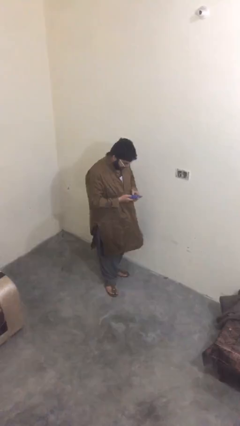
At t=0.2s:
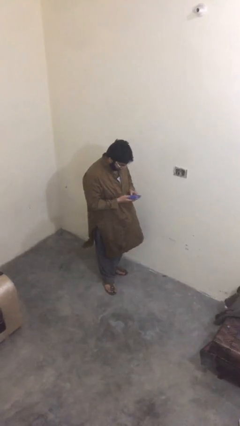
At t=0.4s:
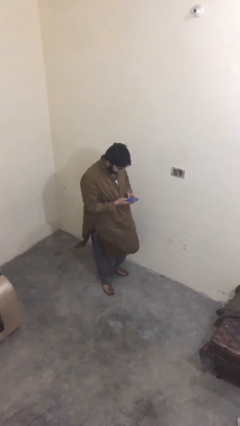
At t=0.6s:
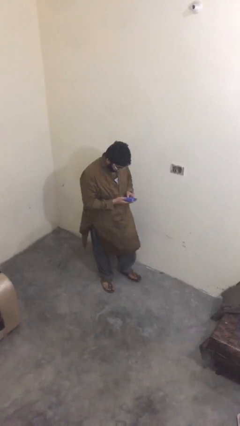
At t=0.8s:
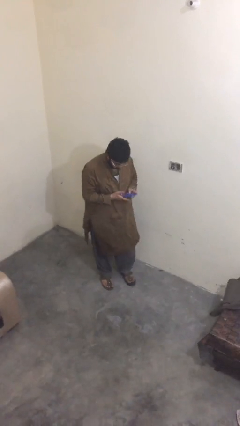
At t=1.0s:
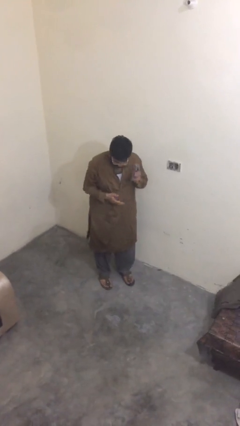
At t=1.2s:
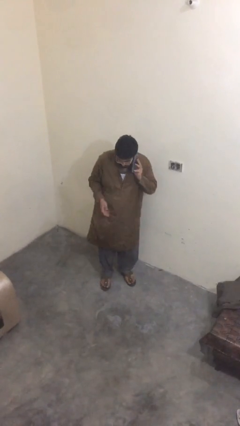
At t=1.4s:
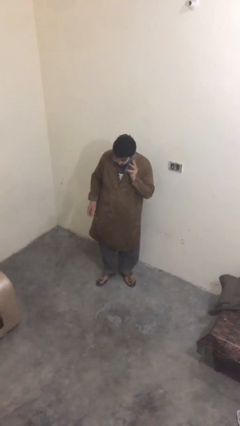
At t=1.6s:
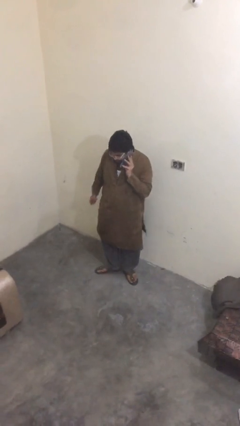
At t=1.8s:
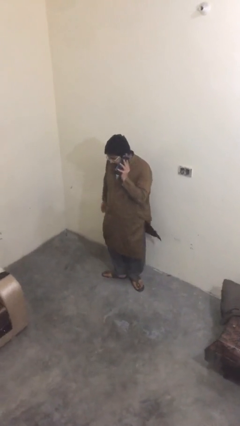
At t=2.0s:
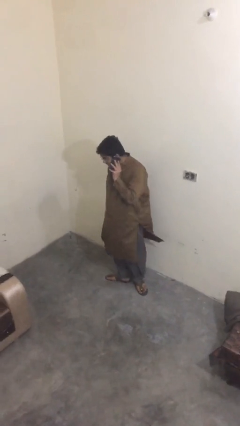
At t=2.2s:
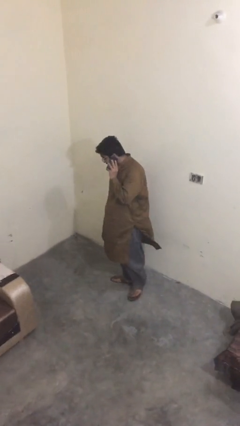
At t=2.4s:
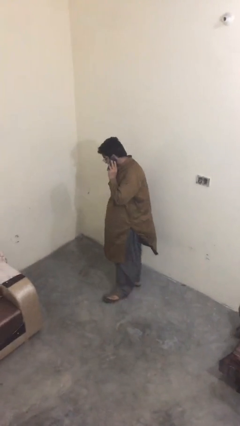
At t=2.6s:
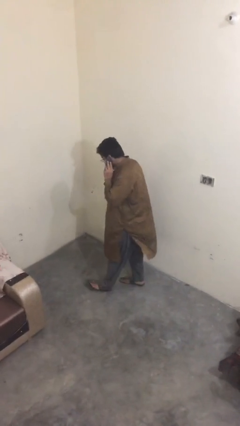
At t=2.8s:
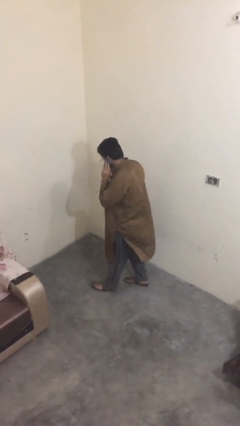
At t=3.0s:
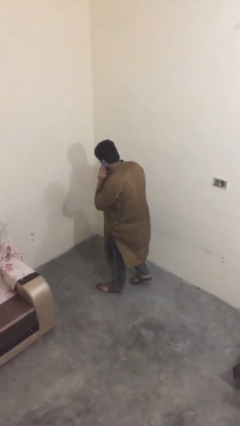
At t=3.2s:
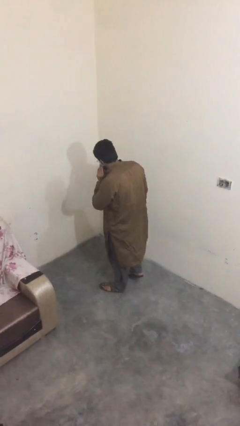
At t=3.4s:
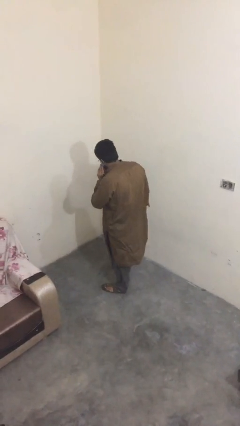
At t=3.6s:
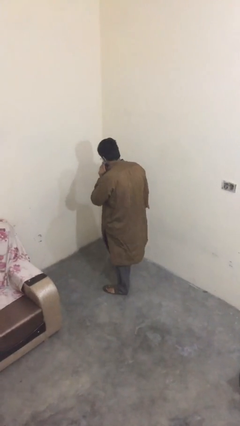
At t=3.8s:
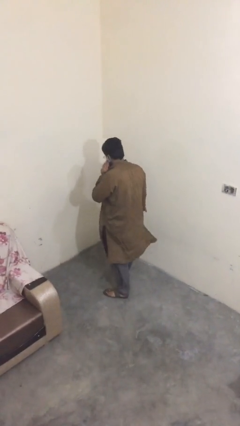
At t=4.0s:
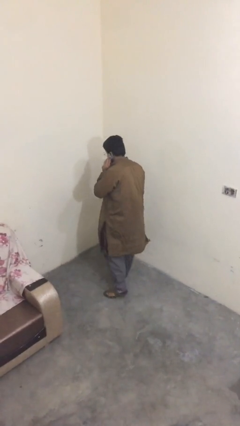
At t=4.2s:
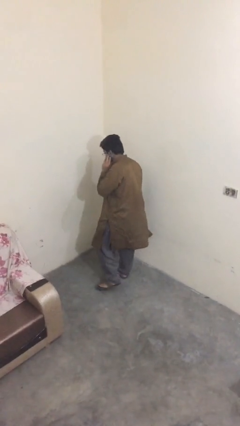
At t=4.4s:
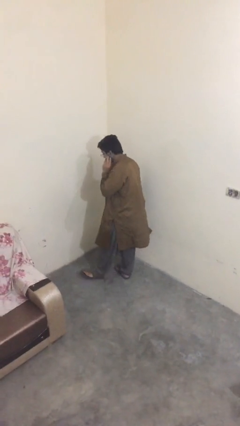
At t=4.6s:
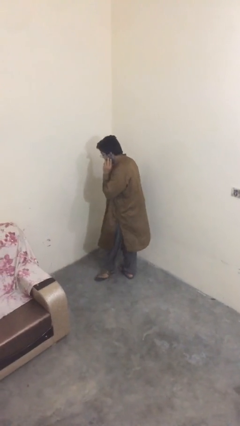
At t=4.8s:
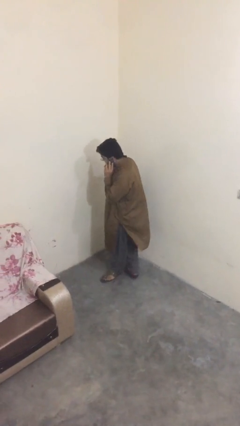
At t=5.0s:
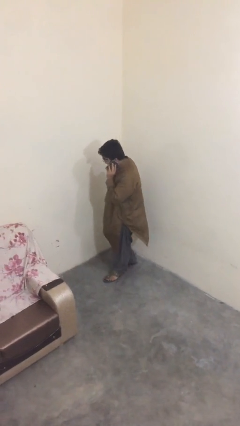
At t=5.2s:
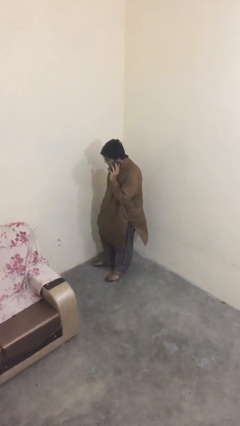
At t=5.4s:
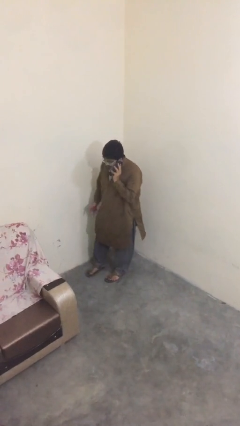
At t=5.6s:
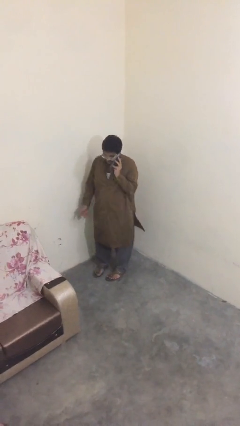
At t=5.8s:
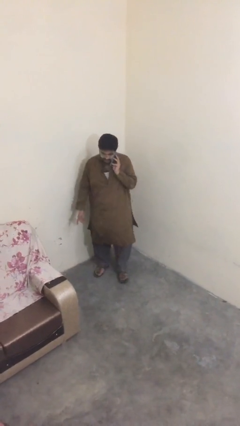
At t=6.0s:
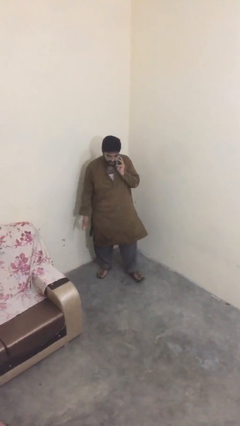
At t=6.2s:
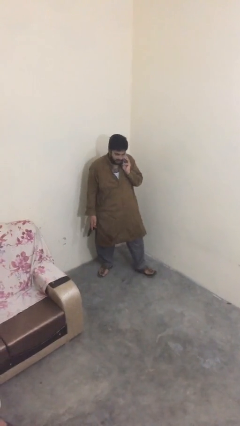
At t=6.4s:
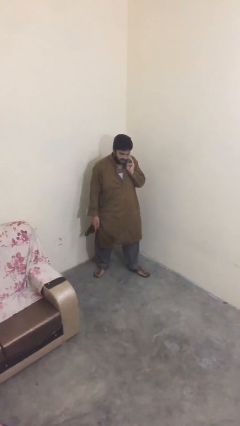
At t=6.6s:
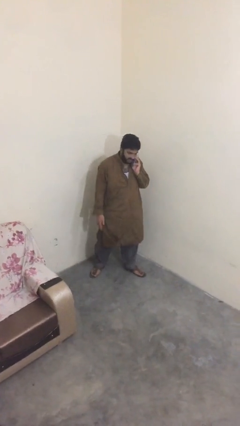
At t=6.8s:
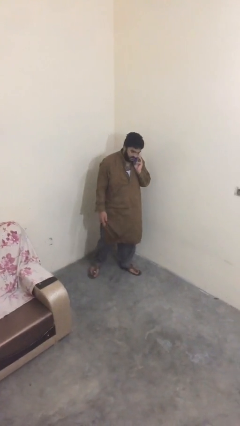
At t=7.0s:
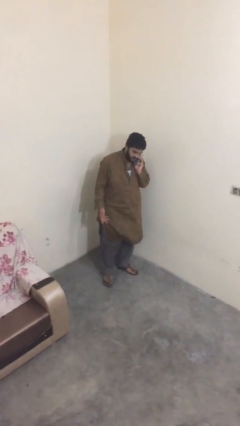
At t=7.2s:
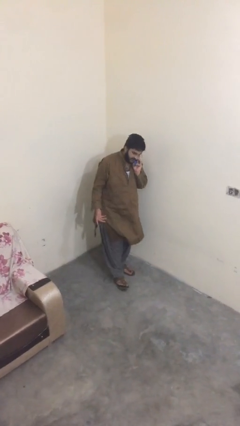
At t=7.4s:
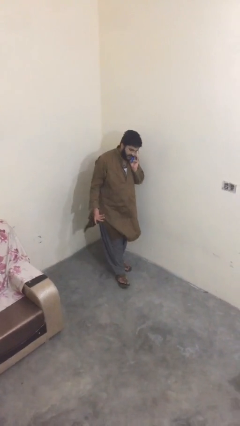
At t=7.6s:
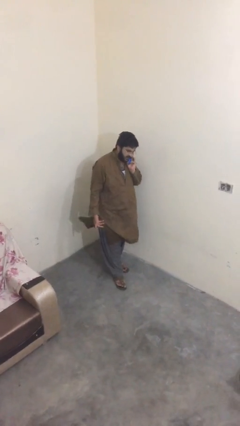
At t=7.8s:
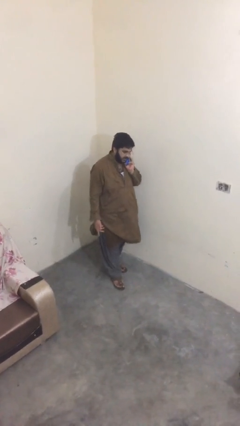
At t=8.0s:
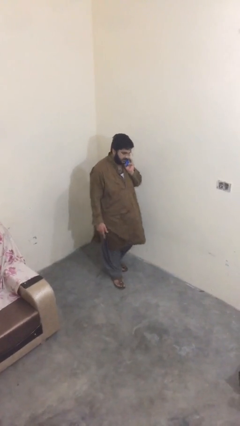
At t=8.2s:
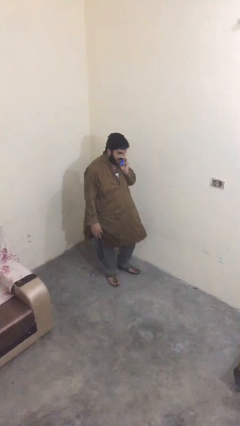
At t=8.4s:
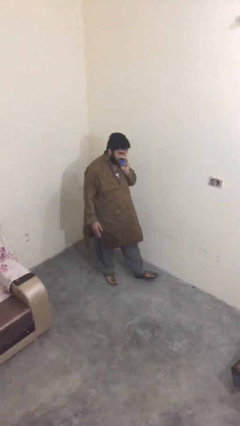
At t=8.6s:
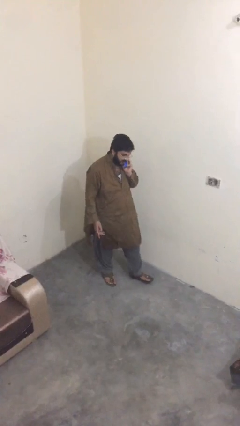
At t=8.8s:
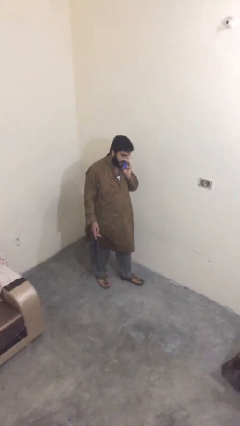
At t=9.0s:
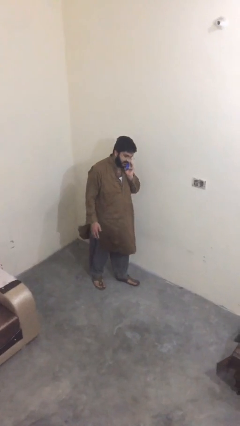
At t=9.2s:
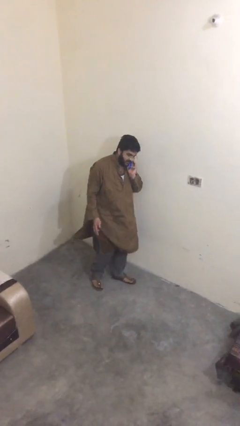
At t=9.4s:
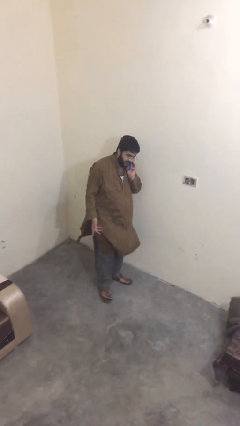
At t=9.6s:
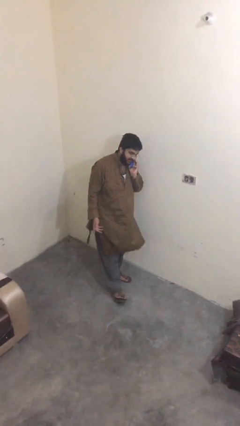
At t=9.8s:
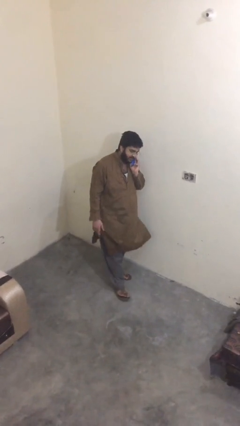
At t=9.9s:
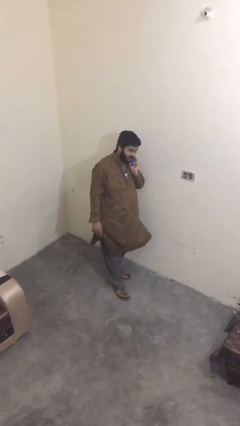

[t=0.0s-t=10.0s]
person talks on phone

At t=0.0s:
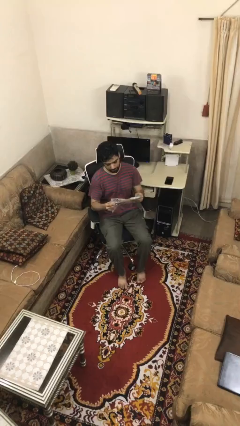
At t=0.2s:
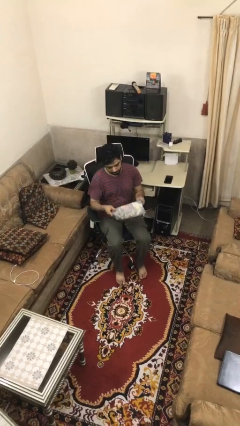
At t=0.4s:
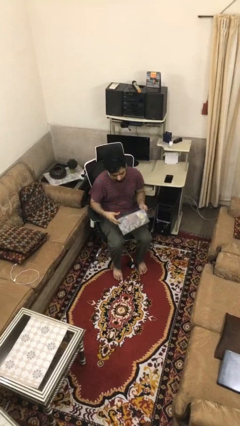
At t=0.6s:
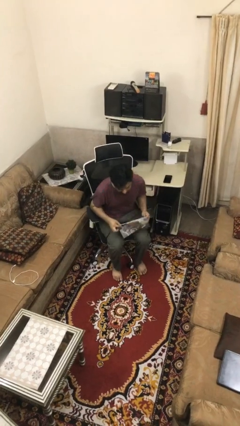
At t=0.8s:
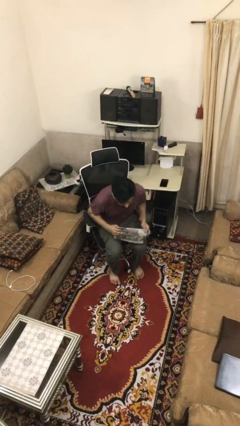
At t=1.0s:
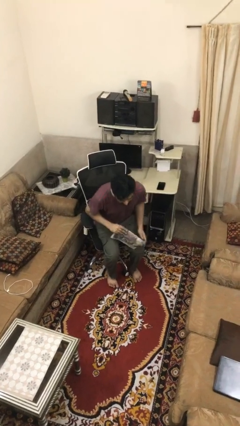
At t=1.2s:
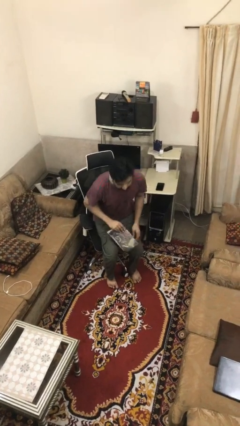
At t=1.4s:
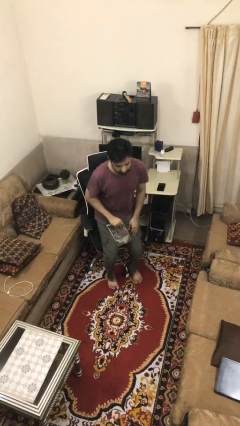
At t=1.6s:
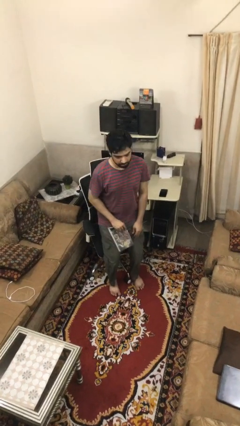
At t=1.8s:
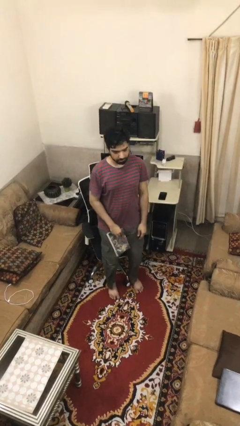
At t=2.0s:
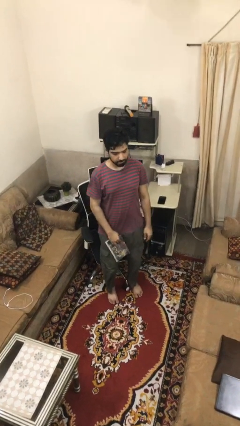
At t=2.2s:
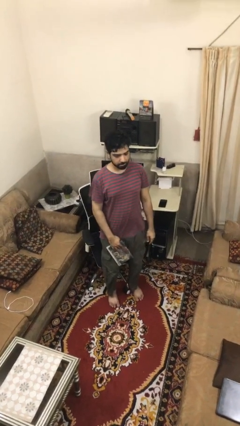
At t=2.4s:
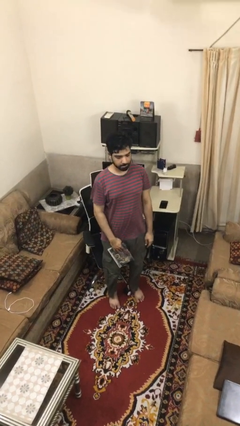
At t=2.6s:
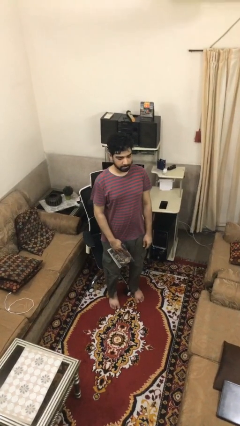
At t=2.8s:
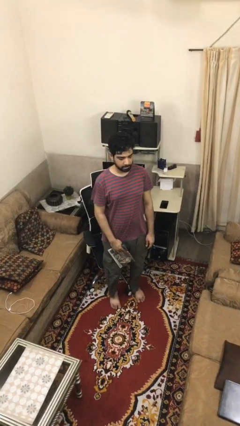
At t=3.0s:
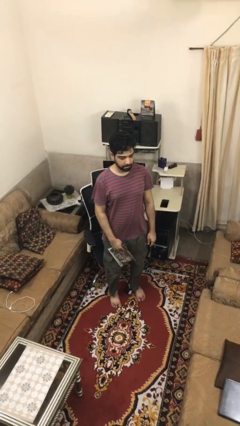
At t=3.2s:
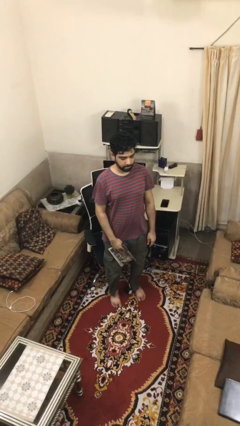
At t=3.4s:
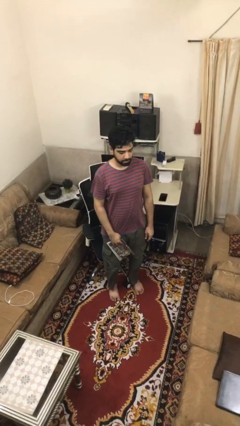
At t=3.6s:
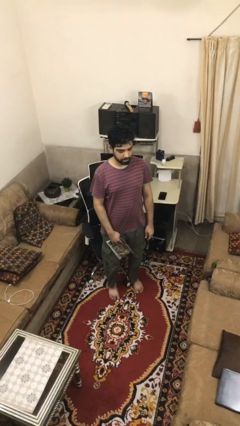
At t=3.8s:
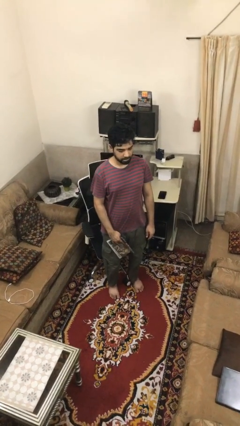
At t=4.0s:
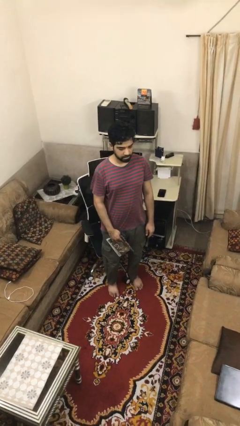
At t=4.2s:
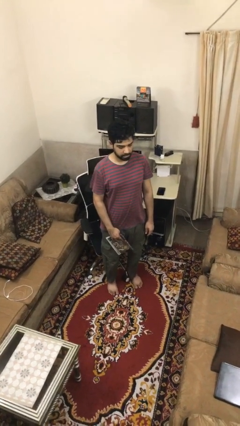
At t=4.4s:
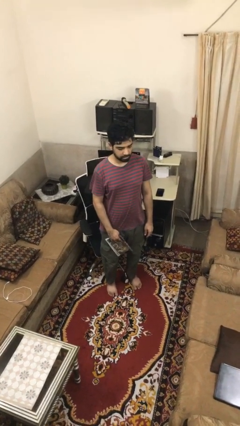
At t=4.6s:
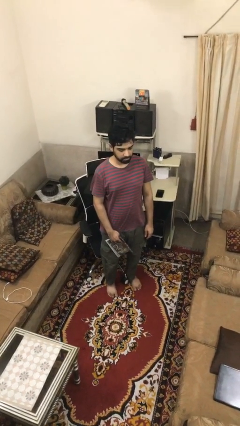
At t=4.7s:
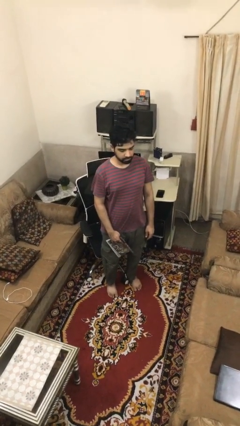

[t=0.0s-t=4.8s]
person stands up

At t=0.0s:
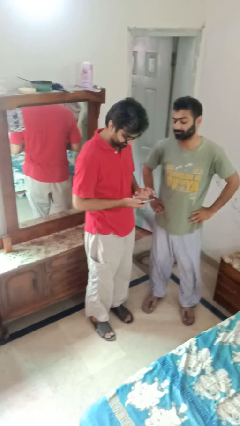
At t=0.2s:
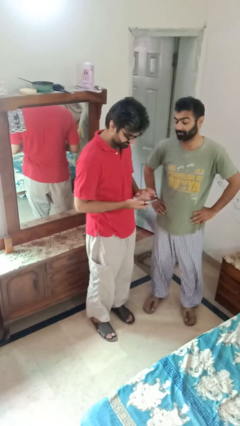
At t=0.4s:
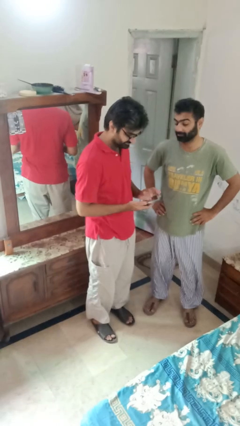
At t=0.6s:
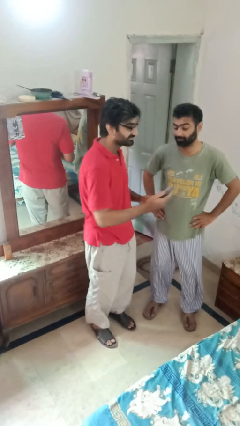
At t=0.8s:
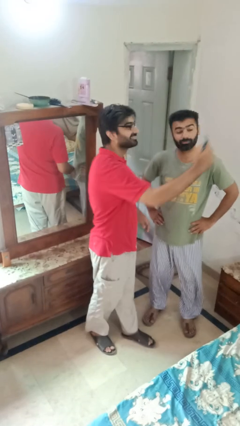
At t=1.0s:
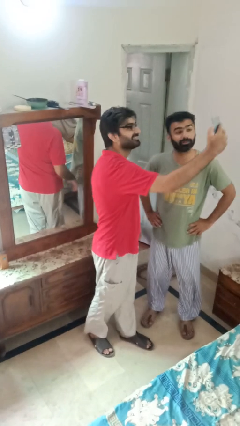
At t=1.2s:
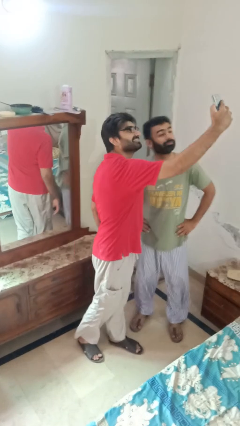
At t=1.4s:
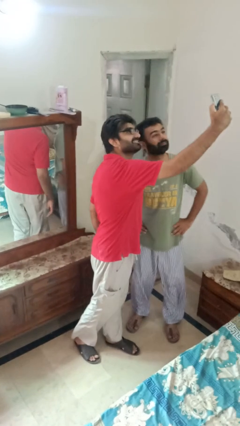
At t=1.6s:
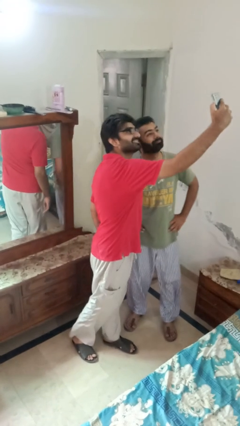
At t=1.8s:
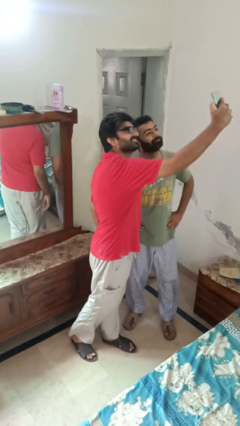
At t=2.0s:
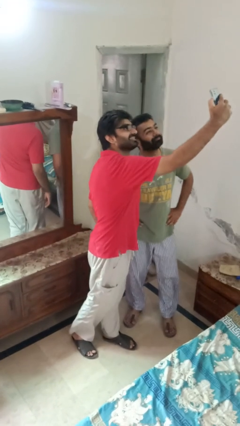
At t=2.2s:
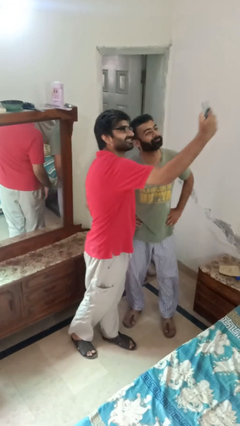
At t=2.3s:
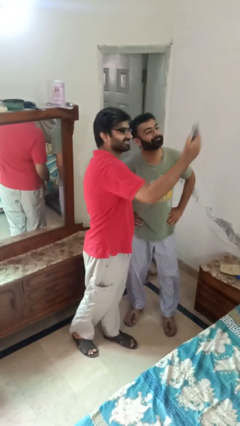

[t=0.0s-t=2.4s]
person takes selfie with person

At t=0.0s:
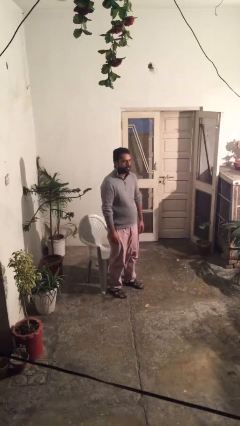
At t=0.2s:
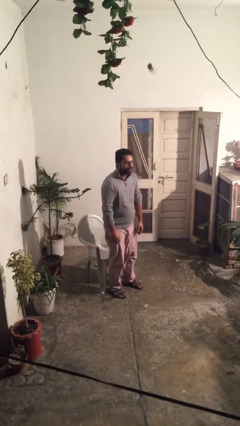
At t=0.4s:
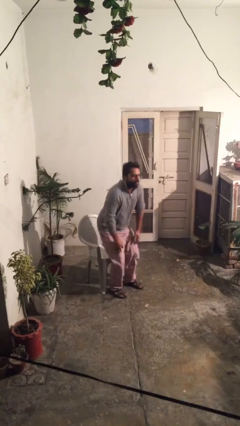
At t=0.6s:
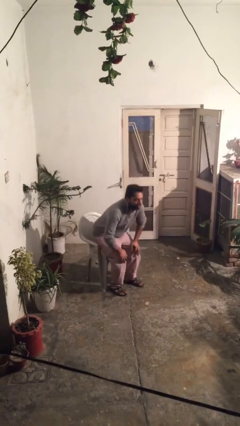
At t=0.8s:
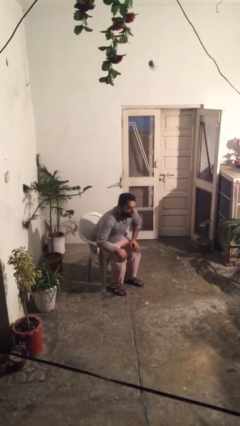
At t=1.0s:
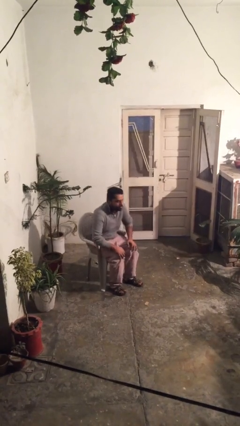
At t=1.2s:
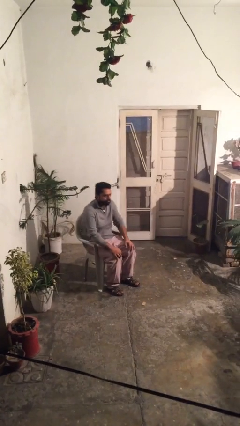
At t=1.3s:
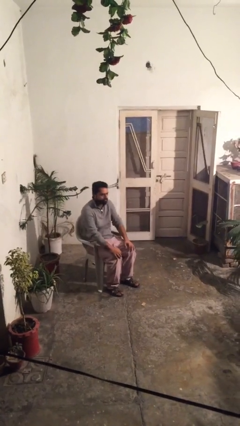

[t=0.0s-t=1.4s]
person sits down
